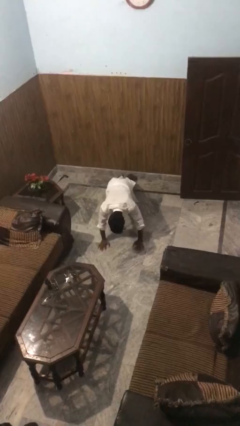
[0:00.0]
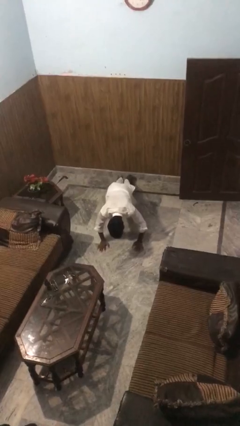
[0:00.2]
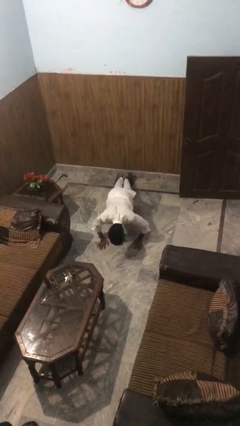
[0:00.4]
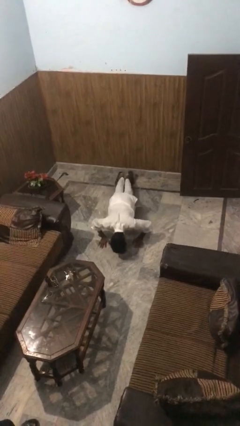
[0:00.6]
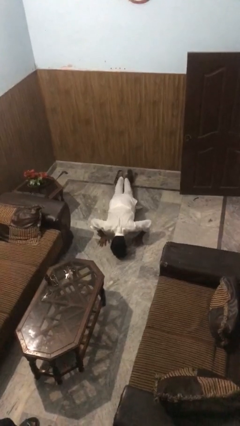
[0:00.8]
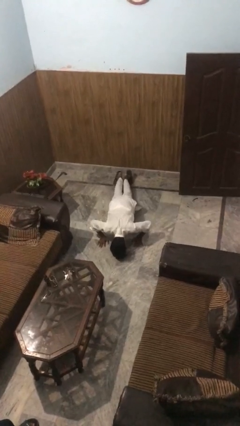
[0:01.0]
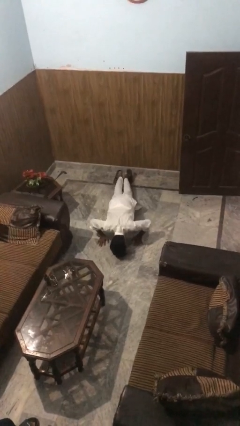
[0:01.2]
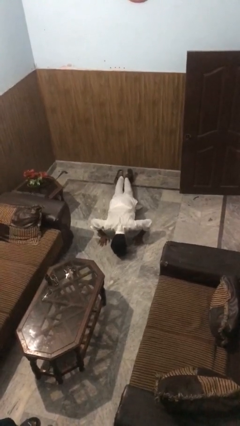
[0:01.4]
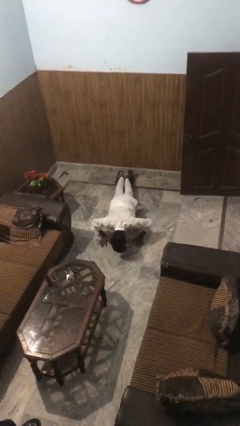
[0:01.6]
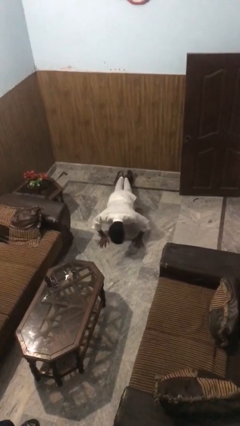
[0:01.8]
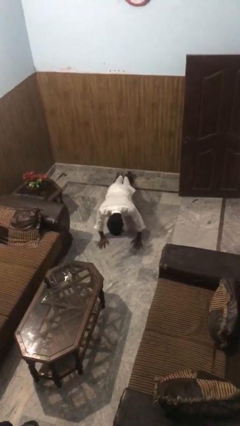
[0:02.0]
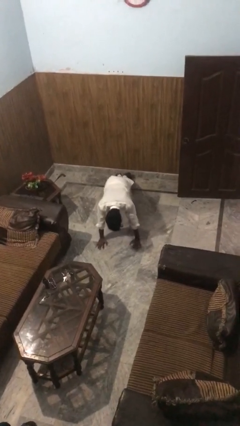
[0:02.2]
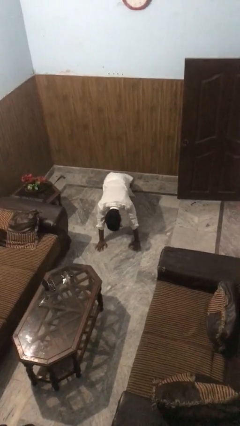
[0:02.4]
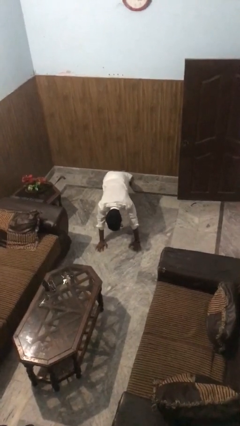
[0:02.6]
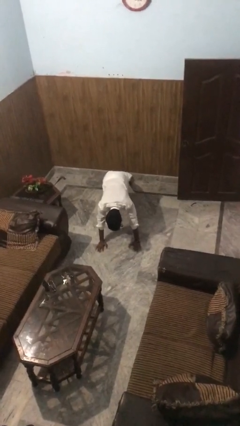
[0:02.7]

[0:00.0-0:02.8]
person exercises with pushup

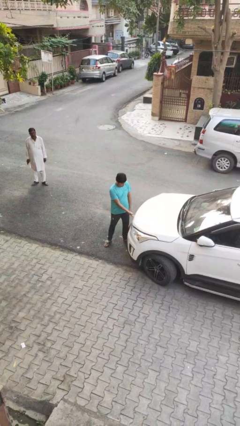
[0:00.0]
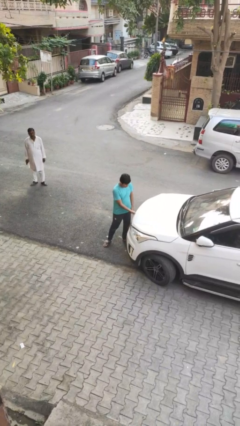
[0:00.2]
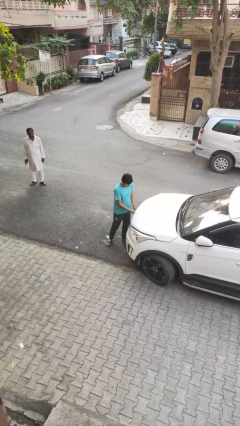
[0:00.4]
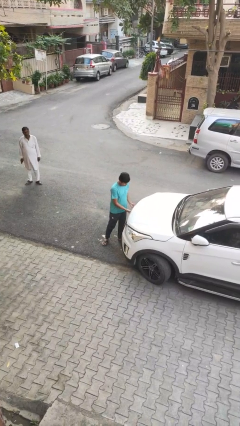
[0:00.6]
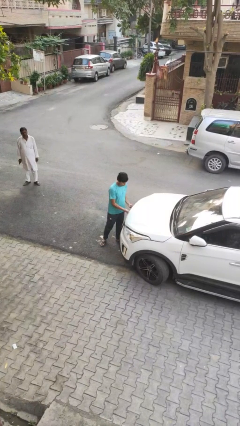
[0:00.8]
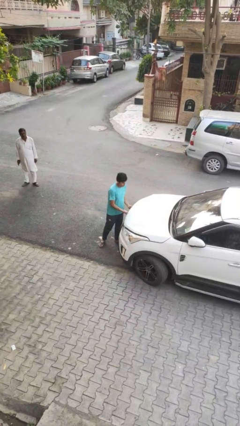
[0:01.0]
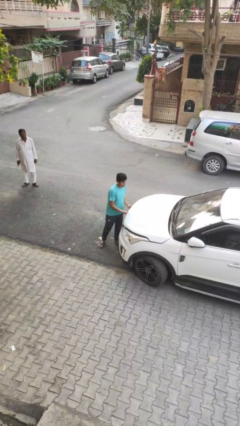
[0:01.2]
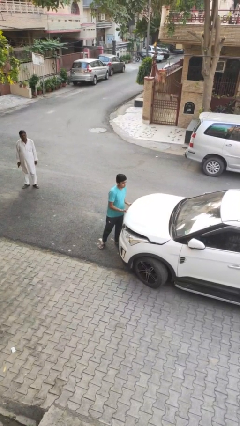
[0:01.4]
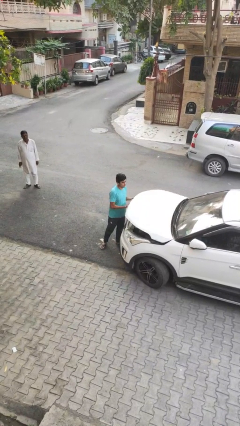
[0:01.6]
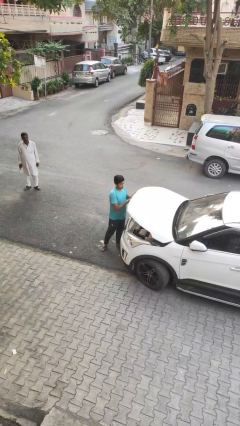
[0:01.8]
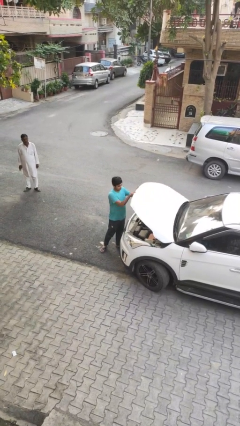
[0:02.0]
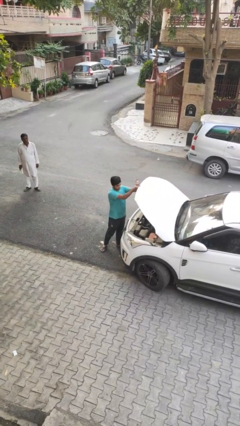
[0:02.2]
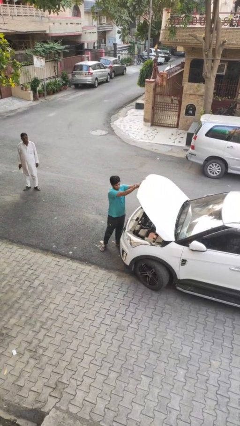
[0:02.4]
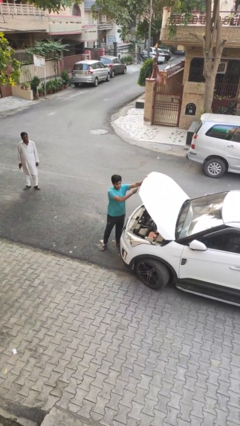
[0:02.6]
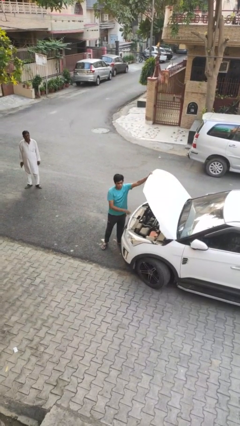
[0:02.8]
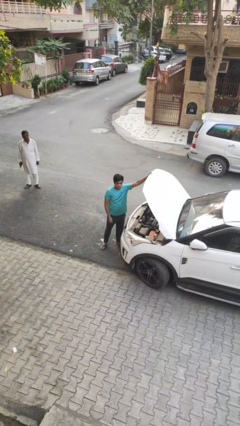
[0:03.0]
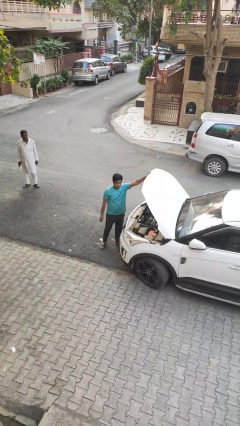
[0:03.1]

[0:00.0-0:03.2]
person opens car hood

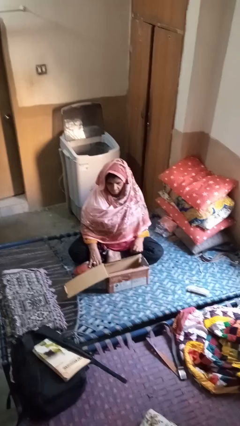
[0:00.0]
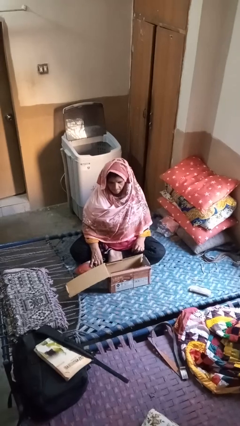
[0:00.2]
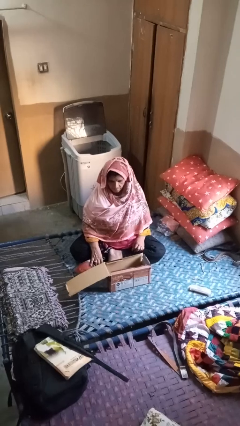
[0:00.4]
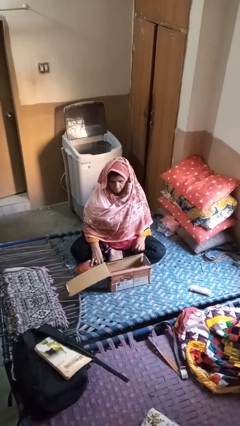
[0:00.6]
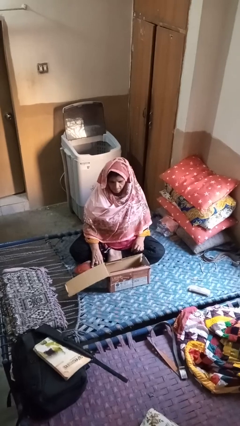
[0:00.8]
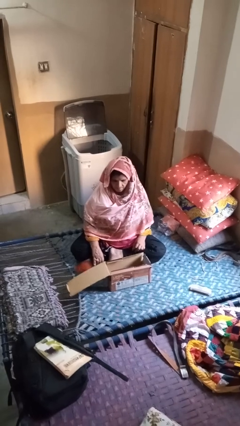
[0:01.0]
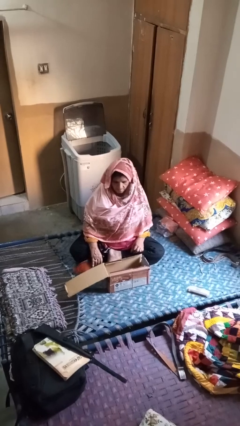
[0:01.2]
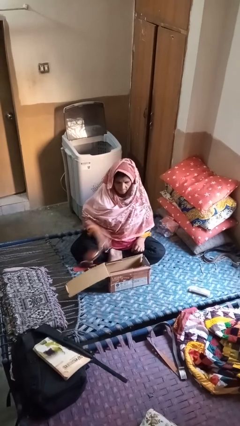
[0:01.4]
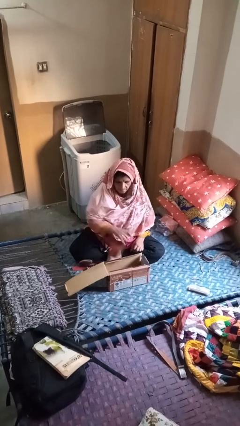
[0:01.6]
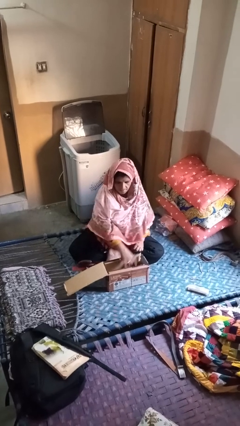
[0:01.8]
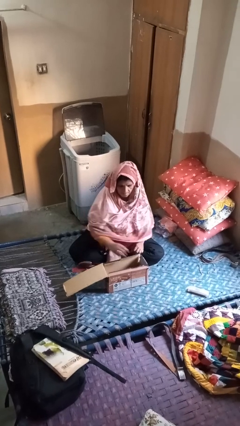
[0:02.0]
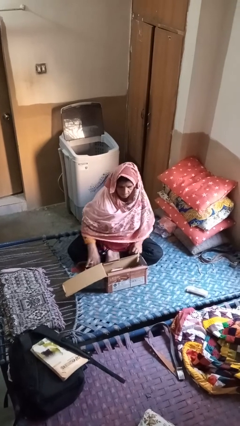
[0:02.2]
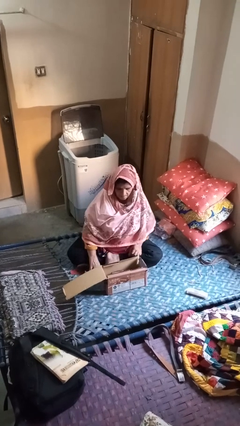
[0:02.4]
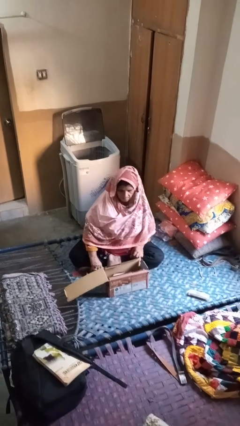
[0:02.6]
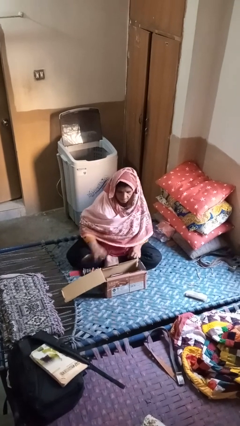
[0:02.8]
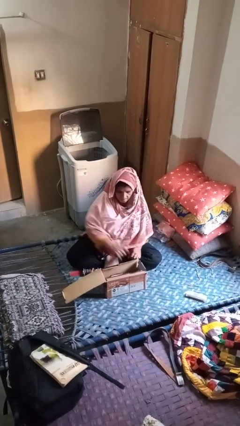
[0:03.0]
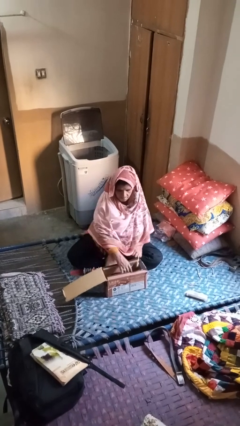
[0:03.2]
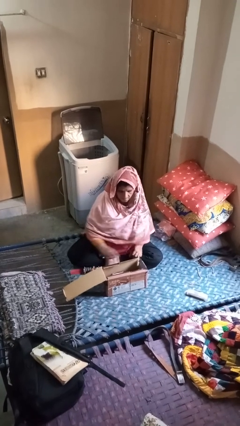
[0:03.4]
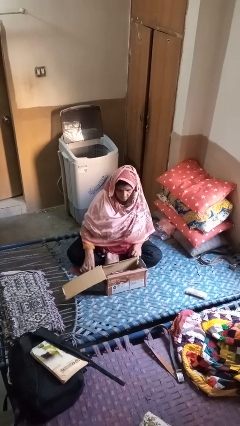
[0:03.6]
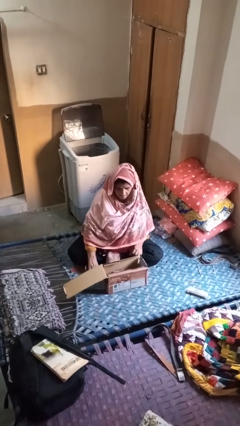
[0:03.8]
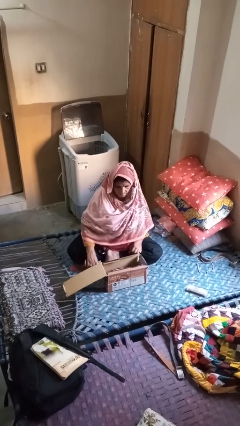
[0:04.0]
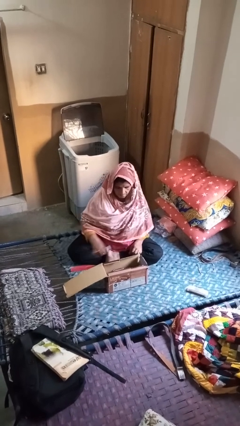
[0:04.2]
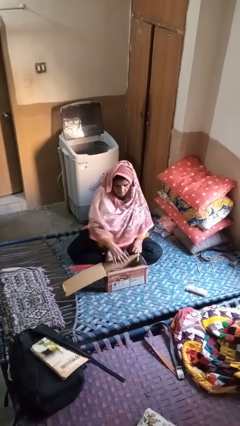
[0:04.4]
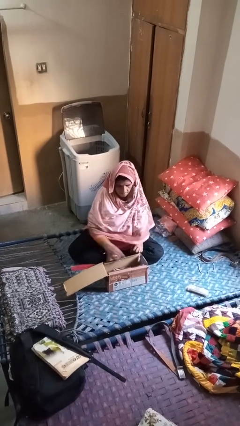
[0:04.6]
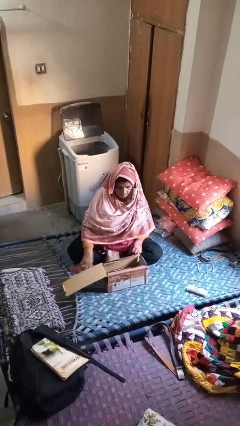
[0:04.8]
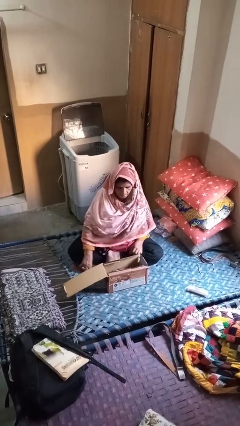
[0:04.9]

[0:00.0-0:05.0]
person puts object into box

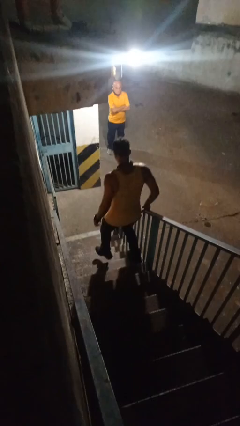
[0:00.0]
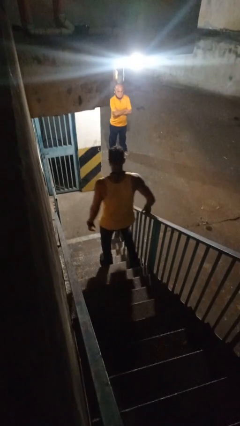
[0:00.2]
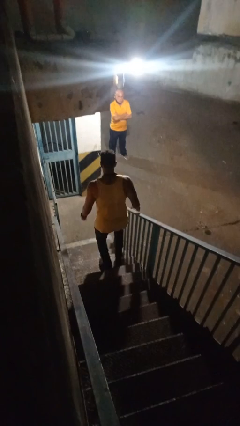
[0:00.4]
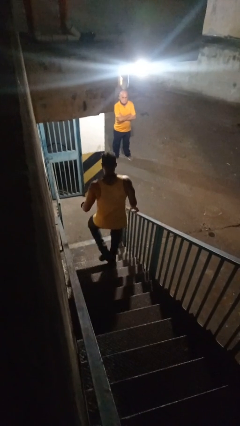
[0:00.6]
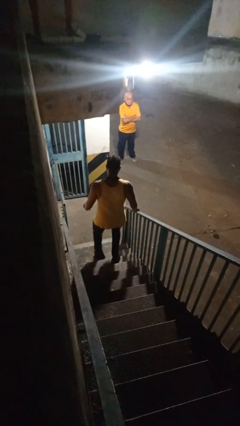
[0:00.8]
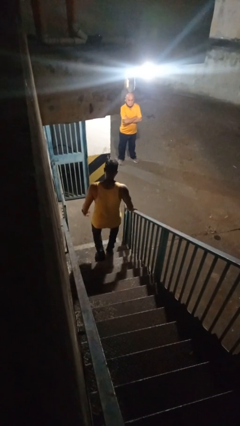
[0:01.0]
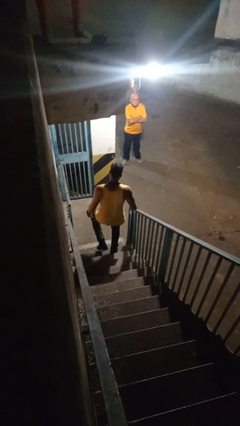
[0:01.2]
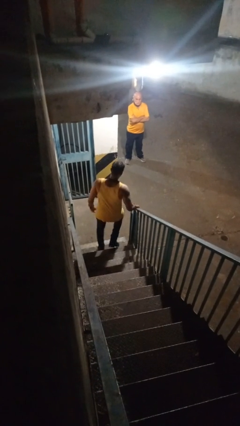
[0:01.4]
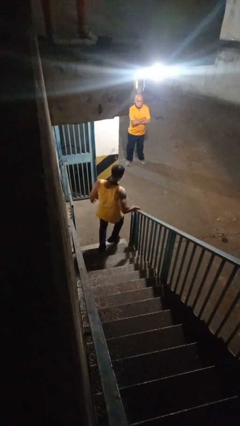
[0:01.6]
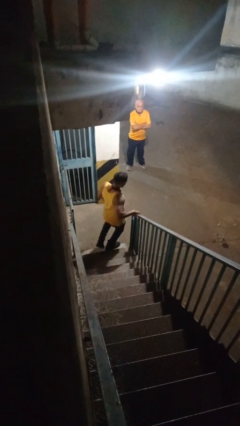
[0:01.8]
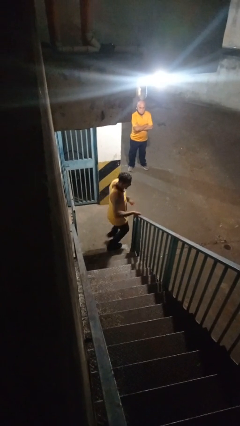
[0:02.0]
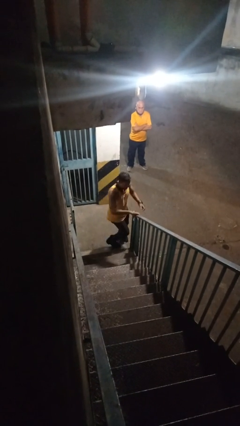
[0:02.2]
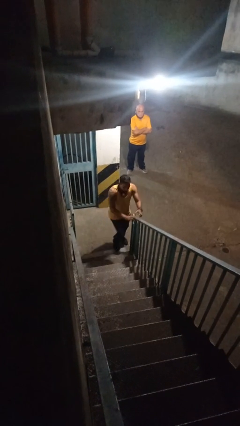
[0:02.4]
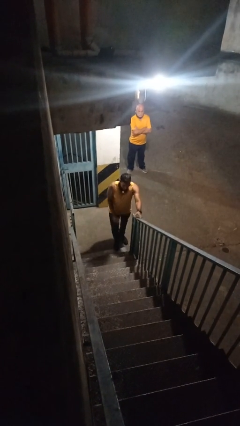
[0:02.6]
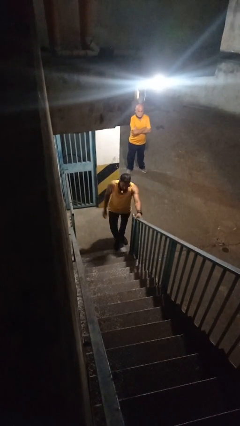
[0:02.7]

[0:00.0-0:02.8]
person climbs down stairs

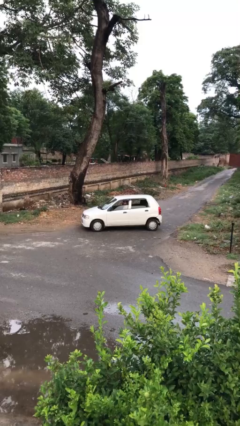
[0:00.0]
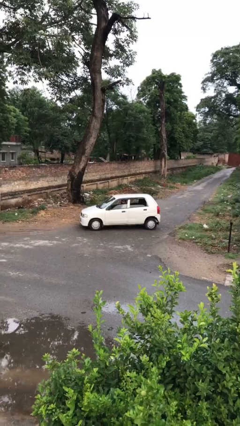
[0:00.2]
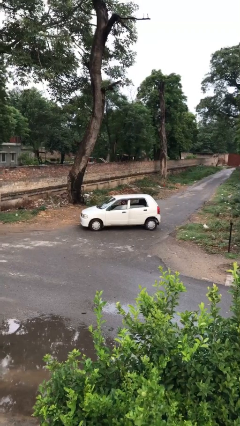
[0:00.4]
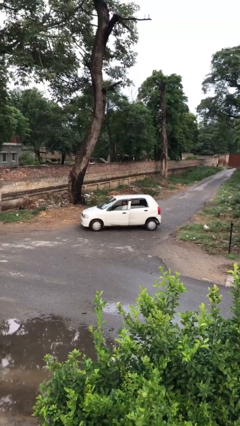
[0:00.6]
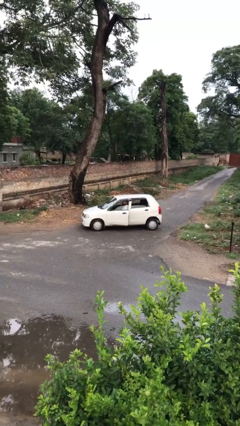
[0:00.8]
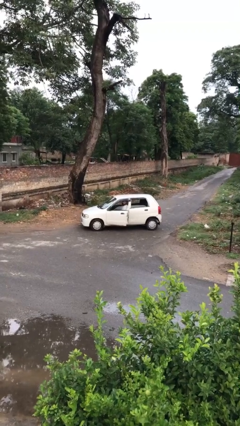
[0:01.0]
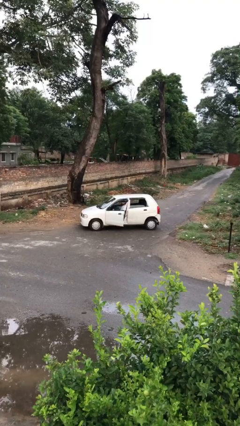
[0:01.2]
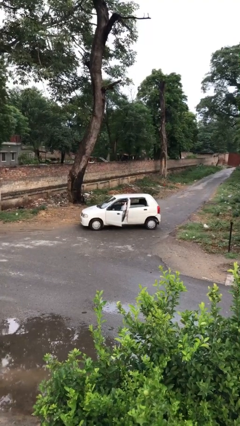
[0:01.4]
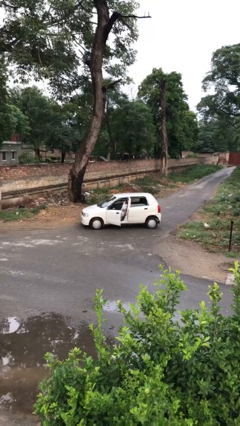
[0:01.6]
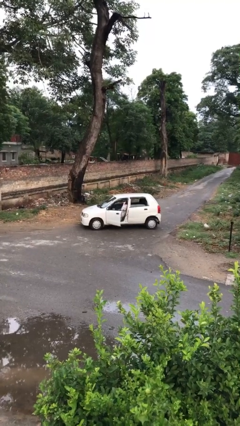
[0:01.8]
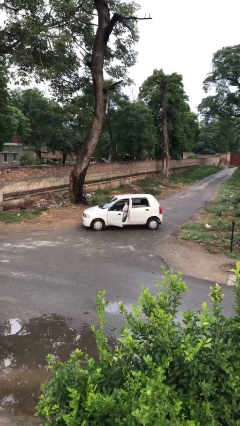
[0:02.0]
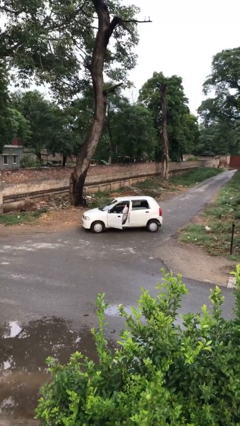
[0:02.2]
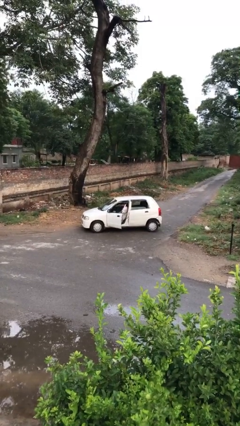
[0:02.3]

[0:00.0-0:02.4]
person opens car door

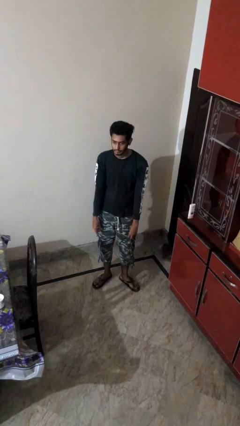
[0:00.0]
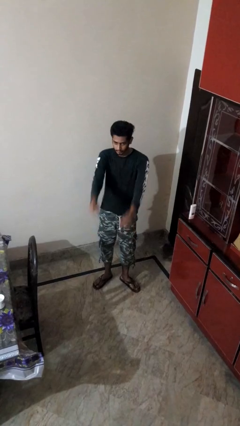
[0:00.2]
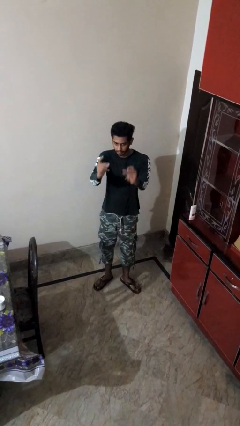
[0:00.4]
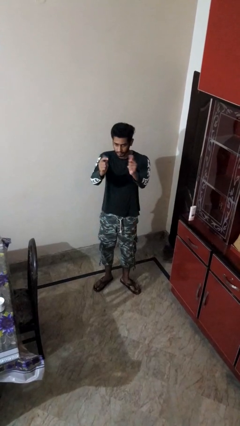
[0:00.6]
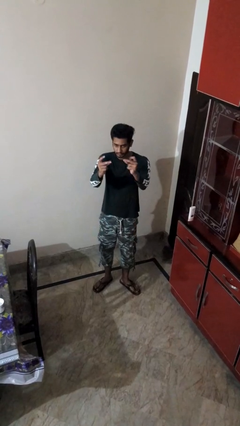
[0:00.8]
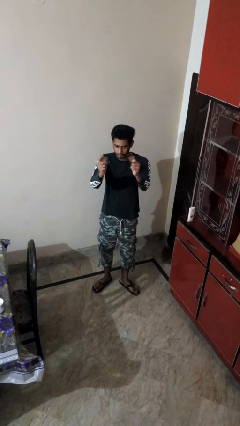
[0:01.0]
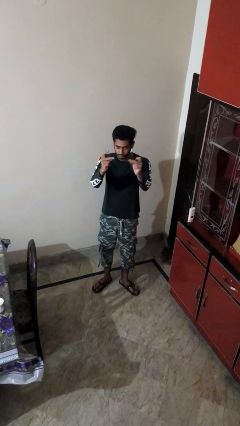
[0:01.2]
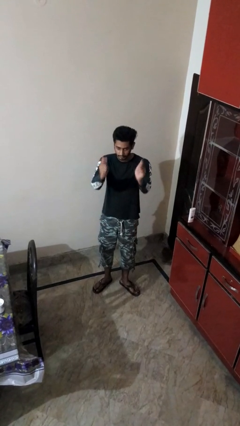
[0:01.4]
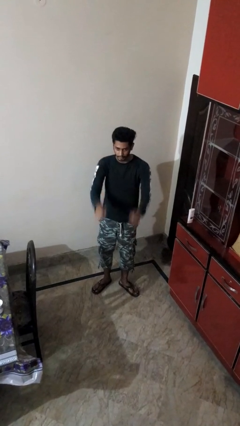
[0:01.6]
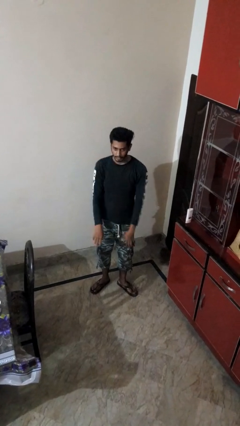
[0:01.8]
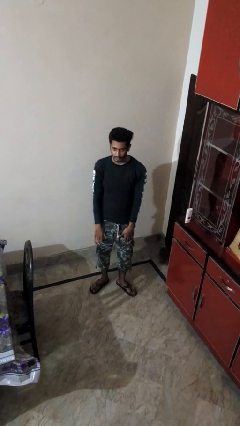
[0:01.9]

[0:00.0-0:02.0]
person snaps fingers
